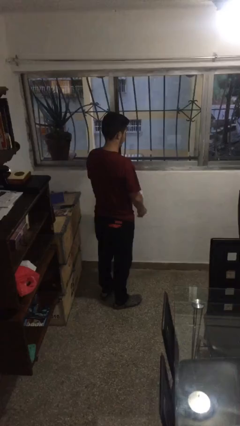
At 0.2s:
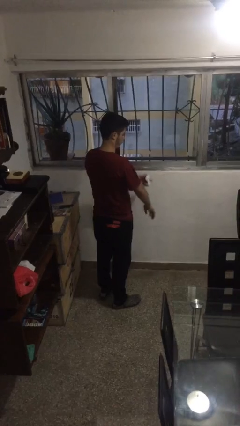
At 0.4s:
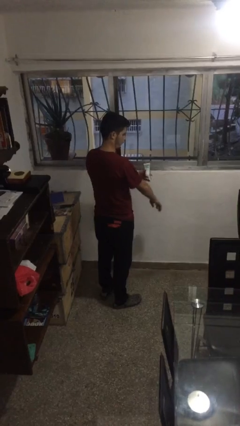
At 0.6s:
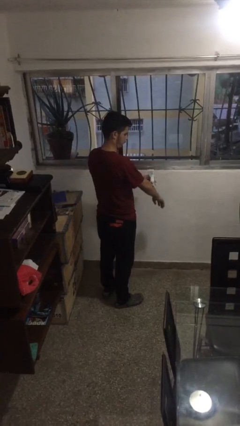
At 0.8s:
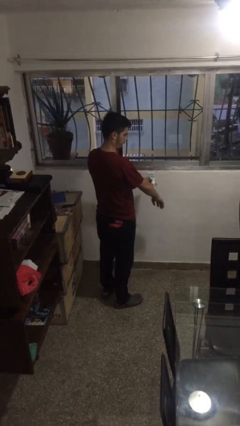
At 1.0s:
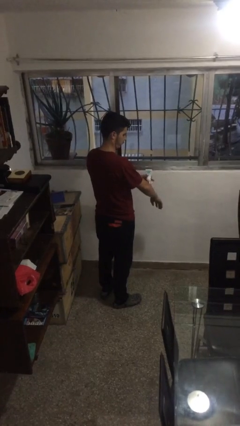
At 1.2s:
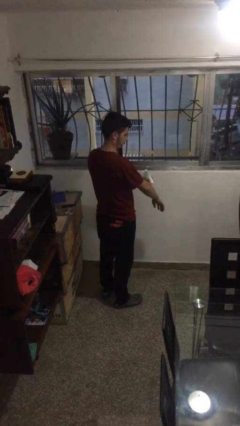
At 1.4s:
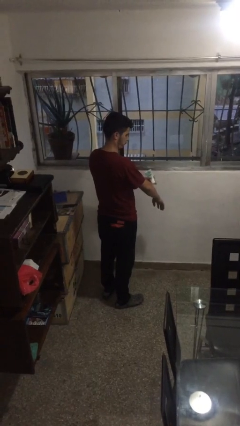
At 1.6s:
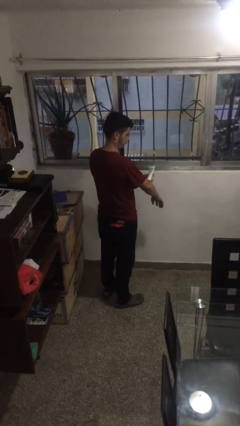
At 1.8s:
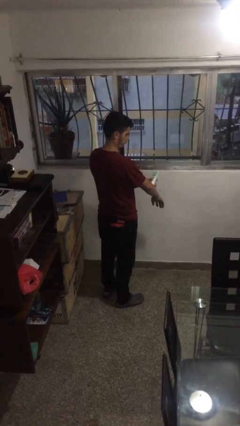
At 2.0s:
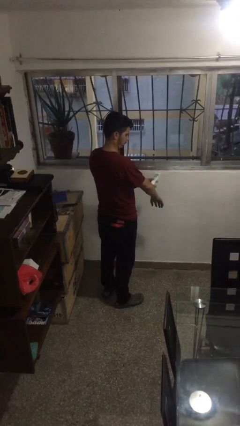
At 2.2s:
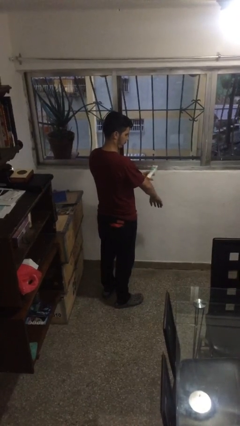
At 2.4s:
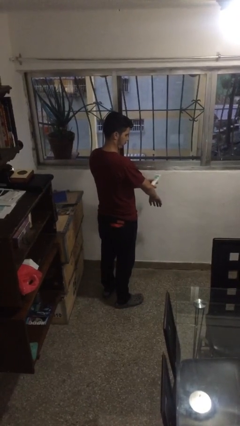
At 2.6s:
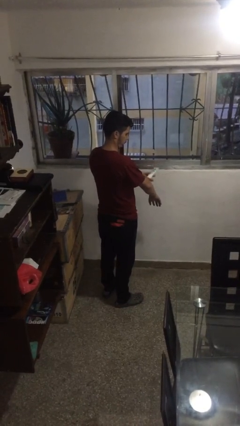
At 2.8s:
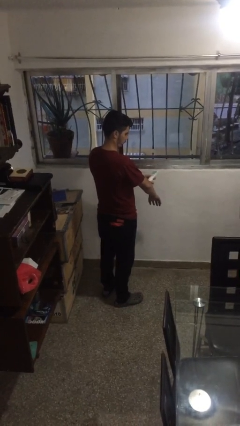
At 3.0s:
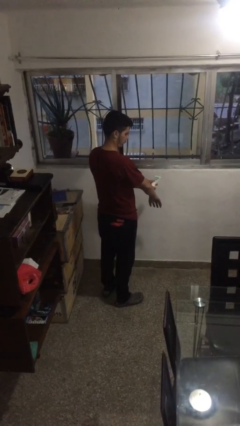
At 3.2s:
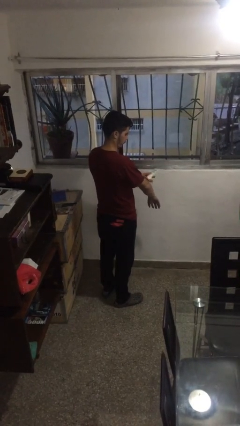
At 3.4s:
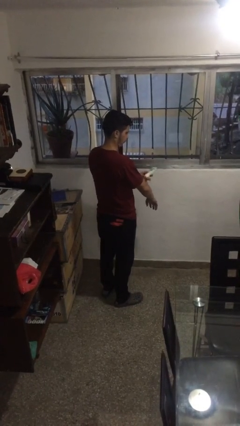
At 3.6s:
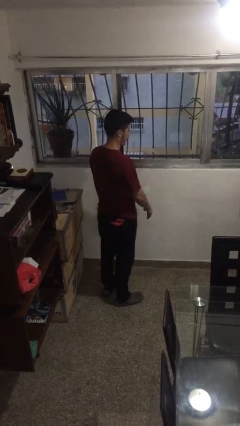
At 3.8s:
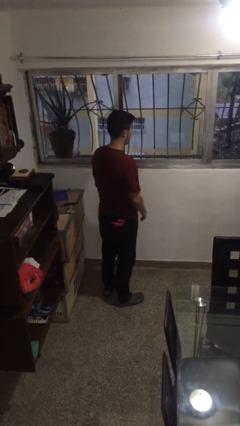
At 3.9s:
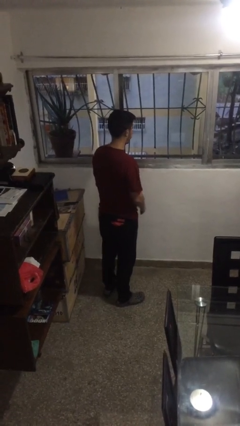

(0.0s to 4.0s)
person applies sunscreen

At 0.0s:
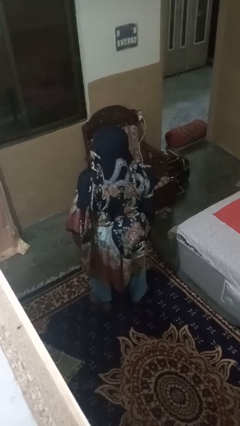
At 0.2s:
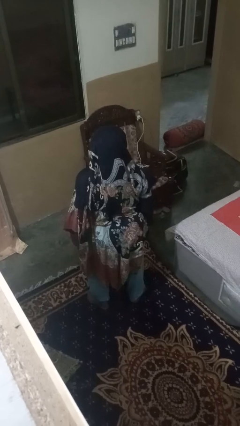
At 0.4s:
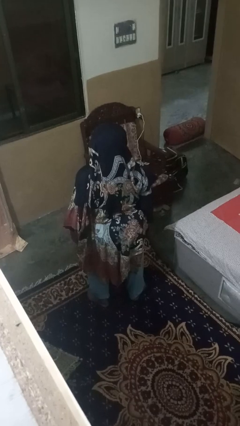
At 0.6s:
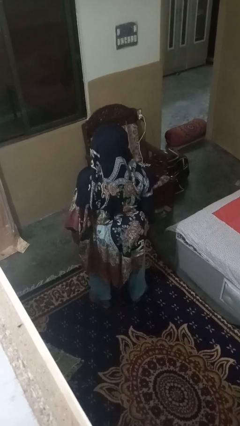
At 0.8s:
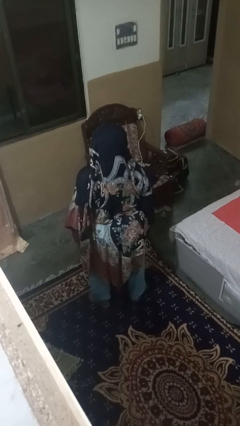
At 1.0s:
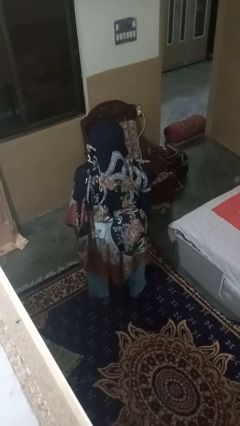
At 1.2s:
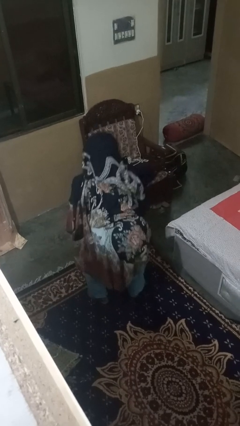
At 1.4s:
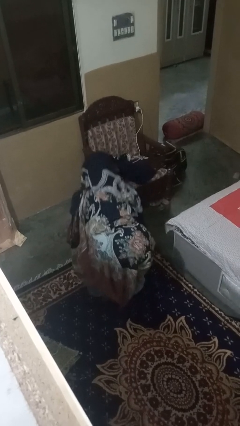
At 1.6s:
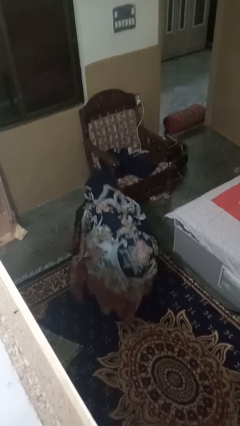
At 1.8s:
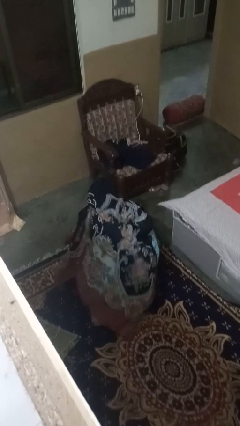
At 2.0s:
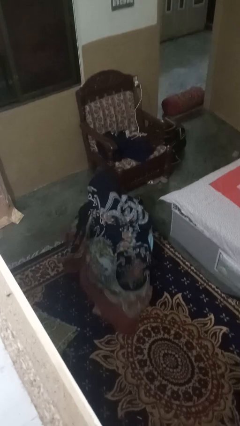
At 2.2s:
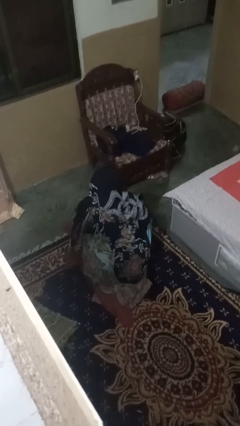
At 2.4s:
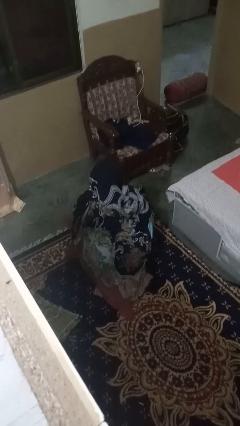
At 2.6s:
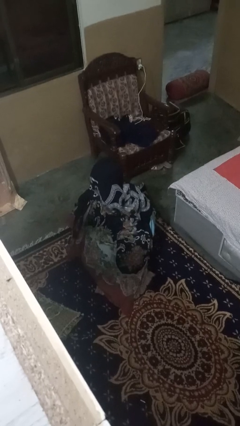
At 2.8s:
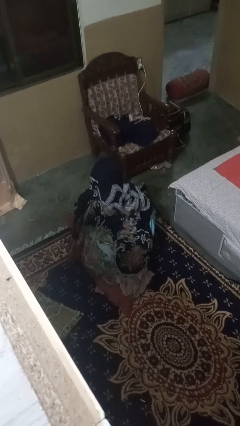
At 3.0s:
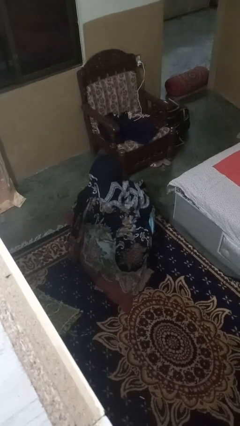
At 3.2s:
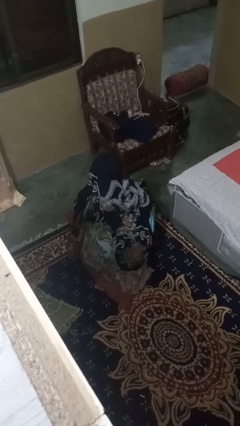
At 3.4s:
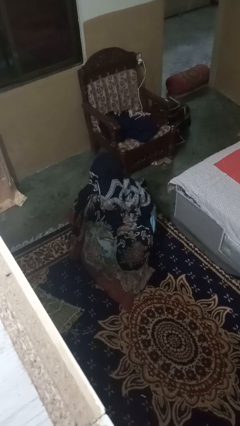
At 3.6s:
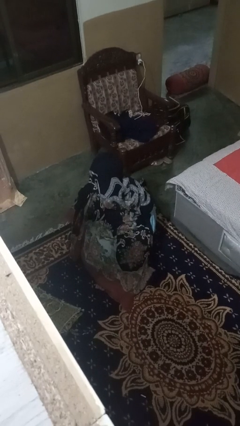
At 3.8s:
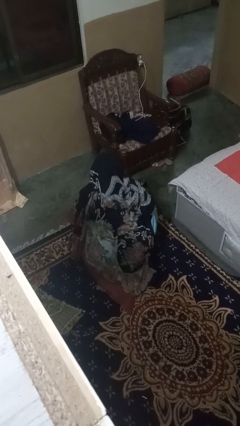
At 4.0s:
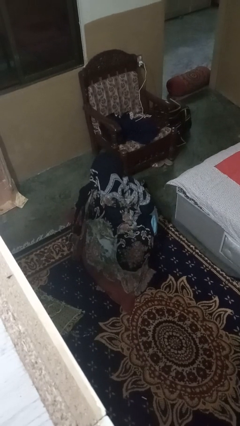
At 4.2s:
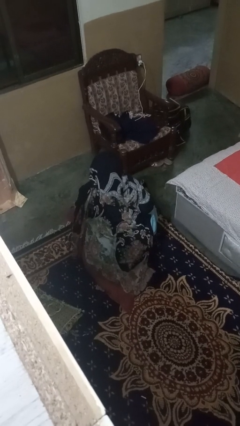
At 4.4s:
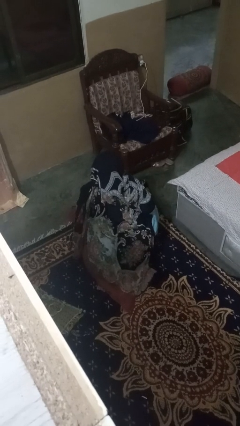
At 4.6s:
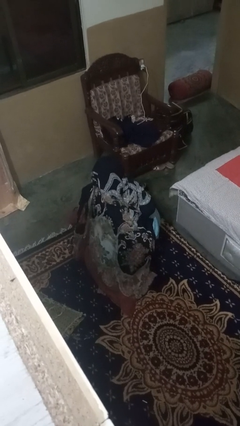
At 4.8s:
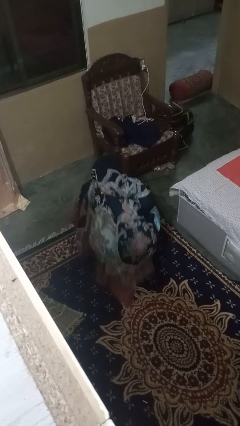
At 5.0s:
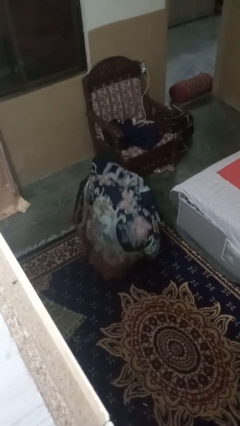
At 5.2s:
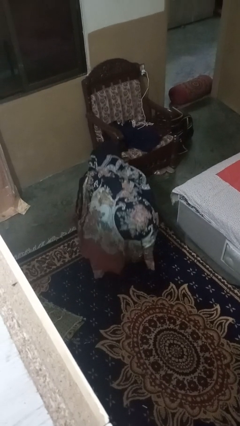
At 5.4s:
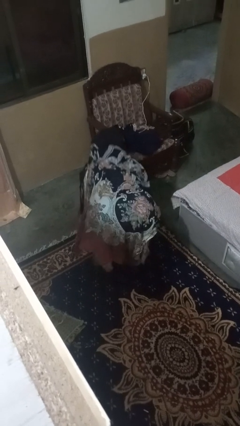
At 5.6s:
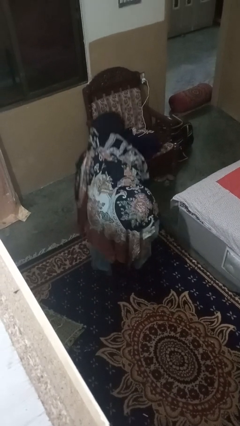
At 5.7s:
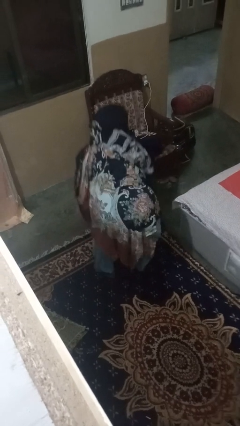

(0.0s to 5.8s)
person squats

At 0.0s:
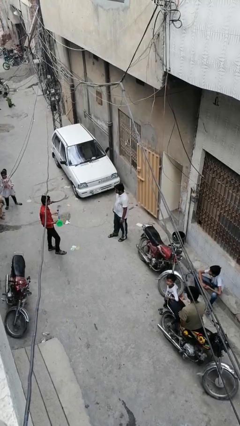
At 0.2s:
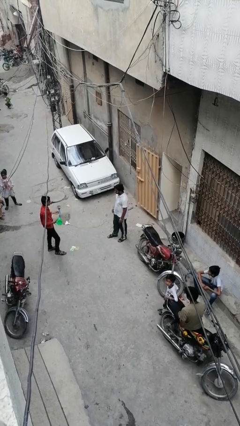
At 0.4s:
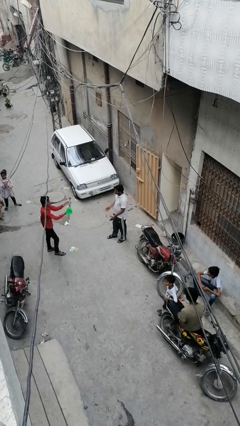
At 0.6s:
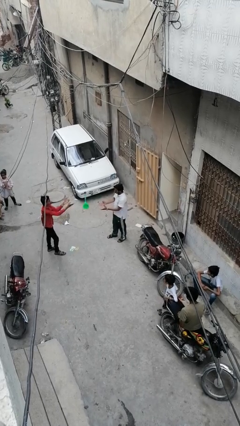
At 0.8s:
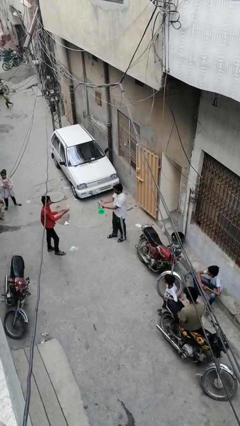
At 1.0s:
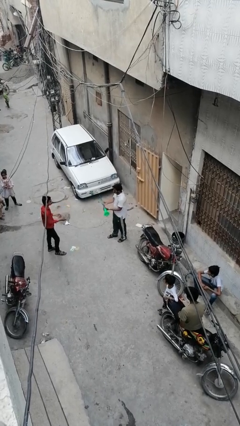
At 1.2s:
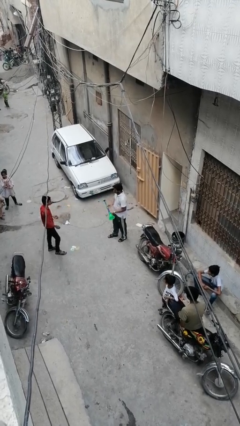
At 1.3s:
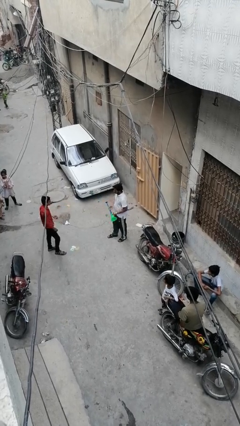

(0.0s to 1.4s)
person catches object from person

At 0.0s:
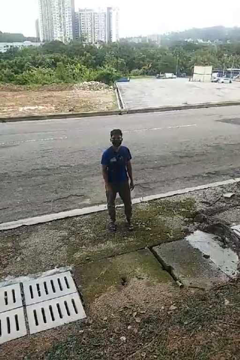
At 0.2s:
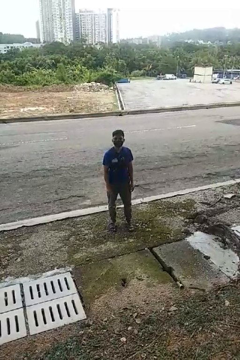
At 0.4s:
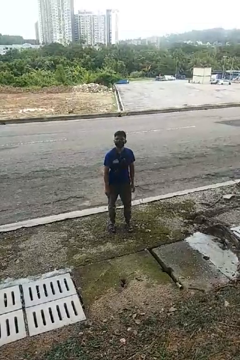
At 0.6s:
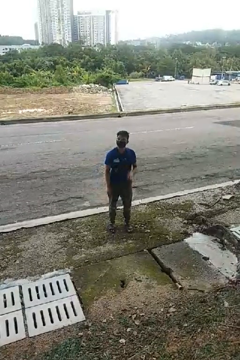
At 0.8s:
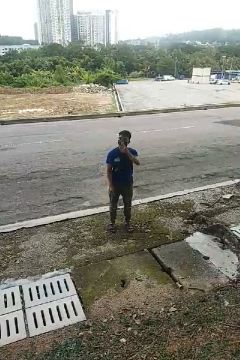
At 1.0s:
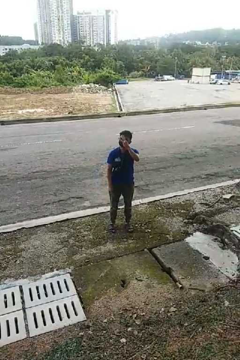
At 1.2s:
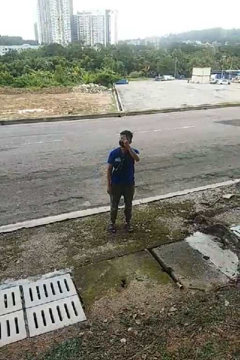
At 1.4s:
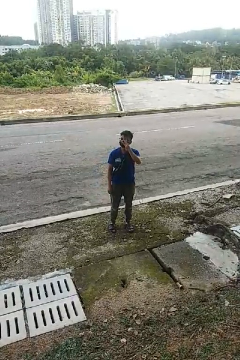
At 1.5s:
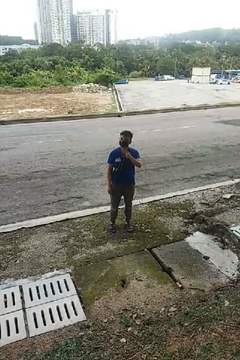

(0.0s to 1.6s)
person gestures number three

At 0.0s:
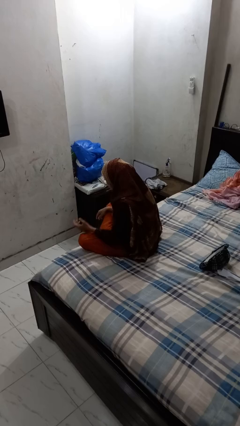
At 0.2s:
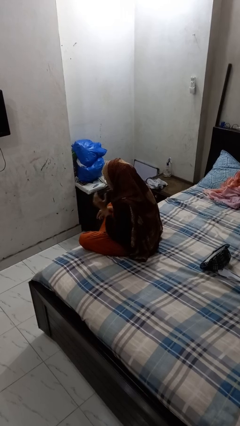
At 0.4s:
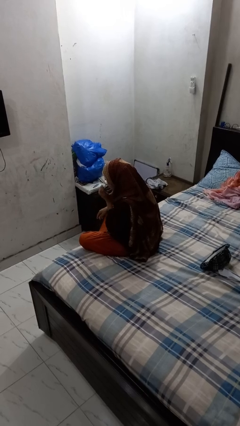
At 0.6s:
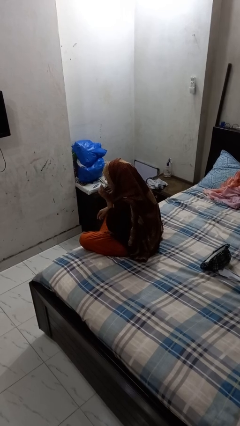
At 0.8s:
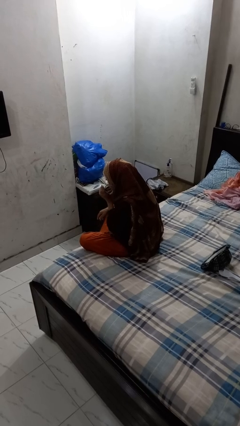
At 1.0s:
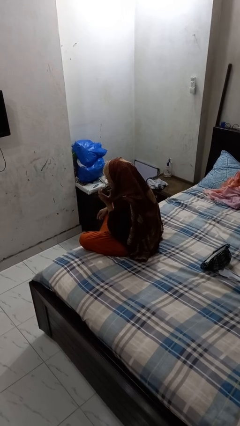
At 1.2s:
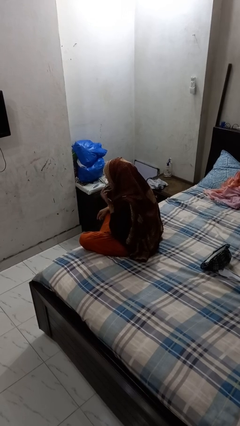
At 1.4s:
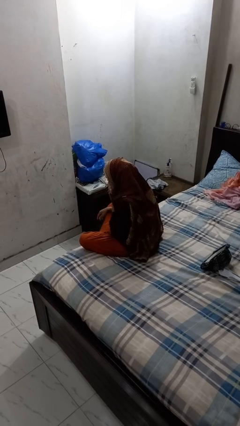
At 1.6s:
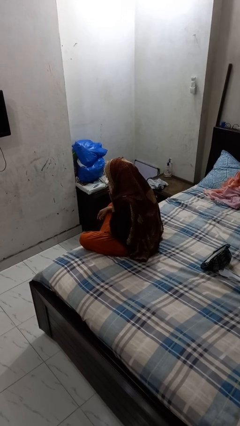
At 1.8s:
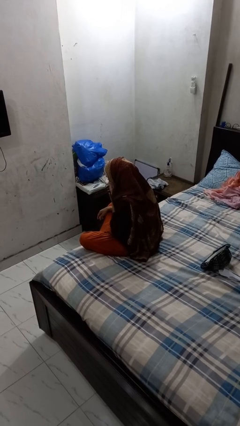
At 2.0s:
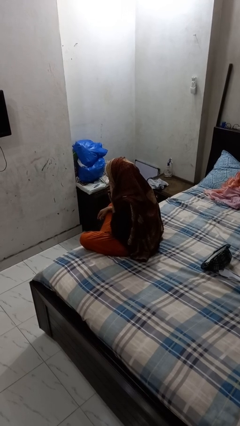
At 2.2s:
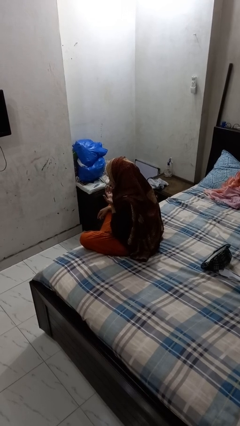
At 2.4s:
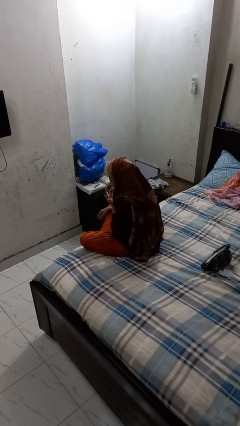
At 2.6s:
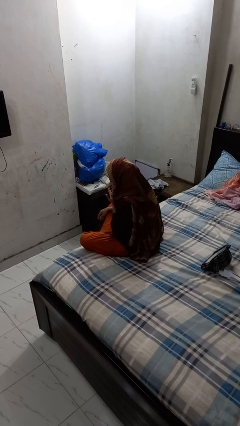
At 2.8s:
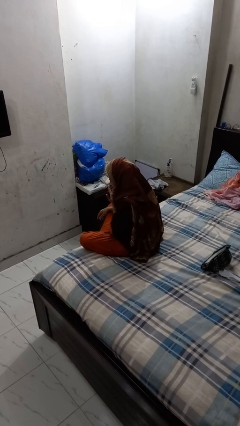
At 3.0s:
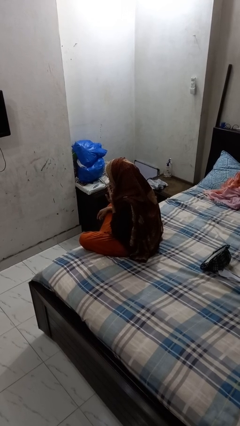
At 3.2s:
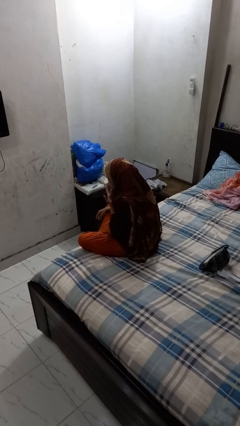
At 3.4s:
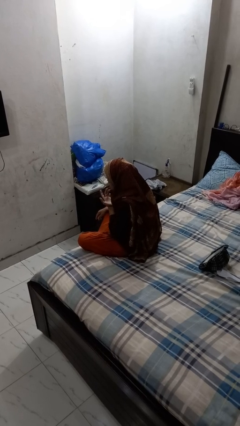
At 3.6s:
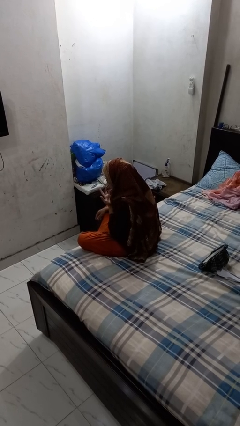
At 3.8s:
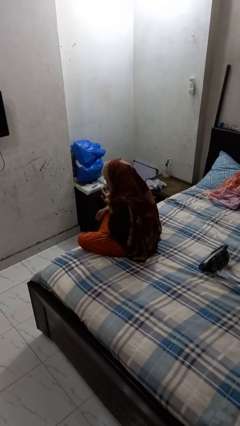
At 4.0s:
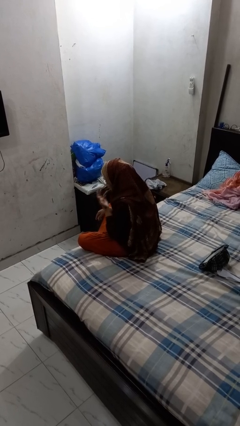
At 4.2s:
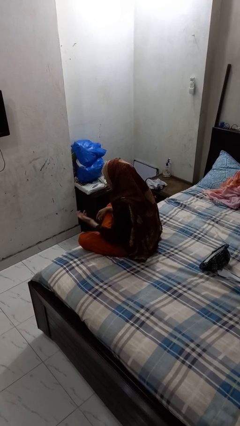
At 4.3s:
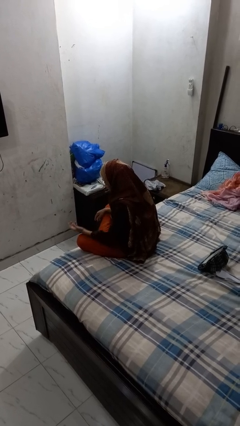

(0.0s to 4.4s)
person licks fingers

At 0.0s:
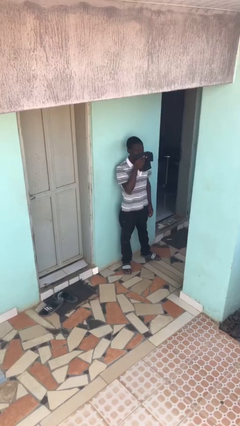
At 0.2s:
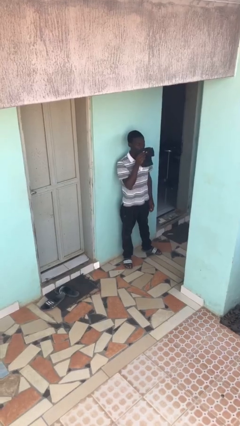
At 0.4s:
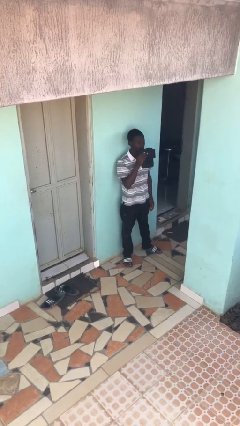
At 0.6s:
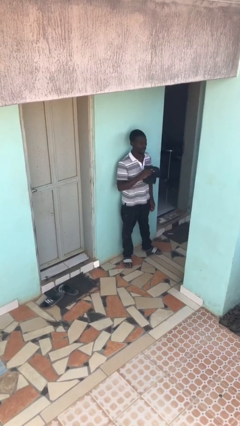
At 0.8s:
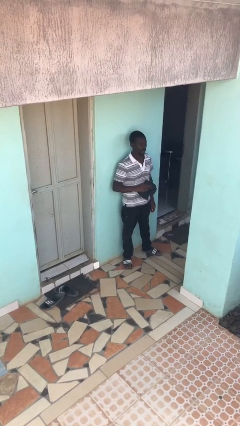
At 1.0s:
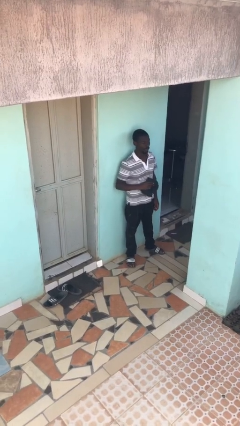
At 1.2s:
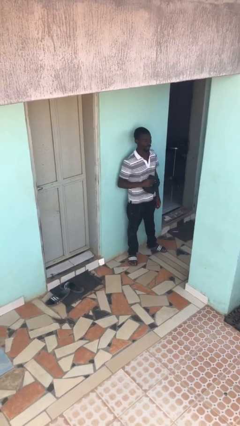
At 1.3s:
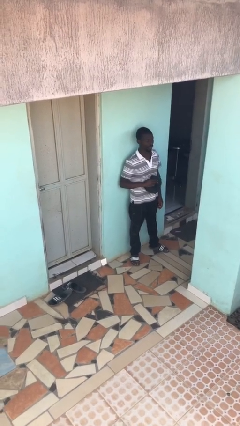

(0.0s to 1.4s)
person wipes mouth with napkin
